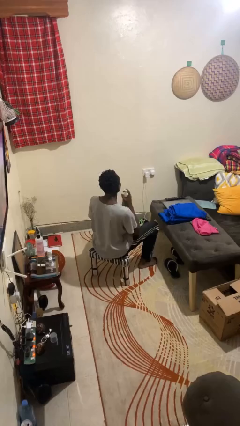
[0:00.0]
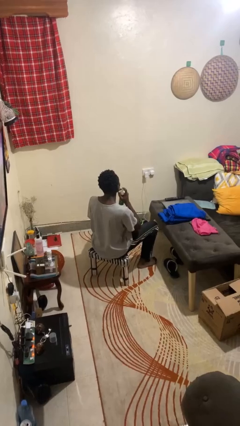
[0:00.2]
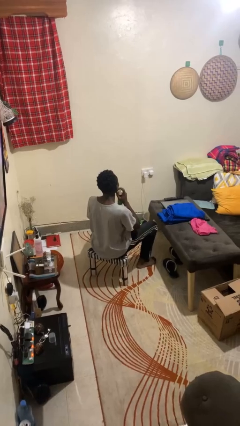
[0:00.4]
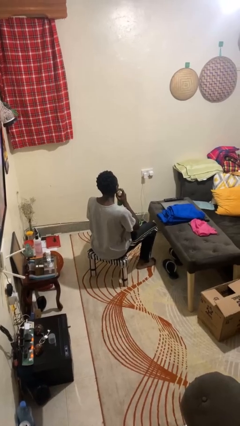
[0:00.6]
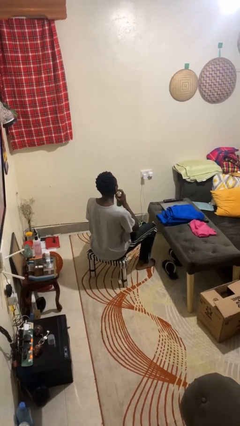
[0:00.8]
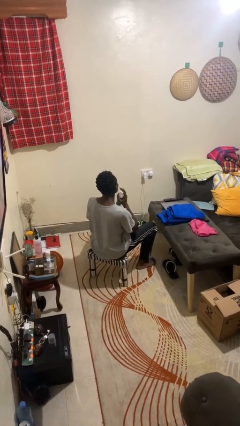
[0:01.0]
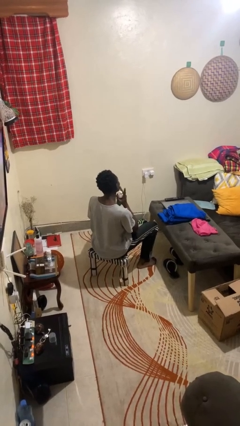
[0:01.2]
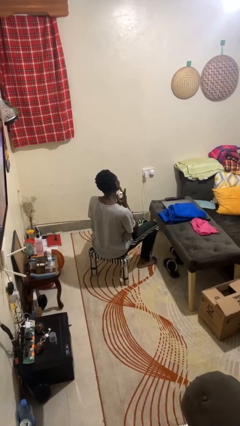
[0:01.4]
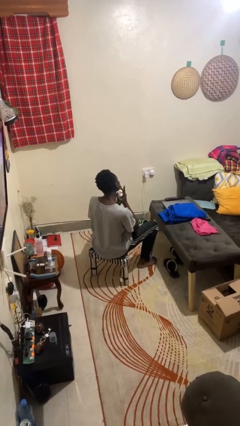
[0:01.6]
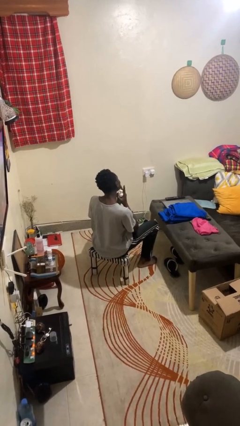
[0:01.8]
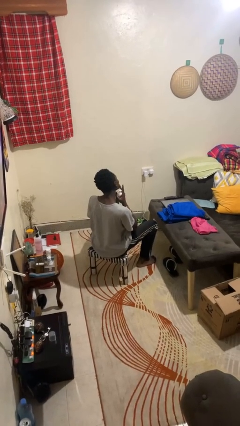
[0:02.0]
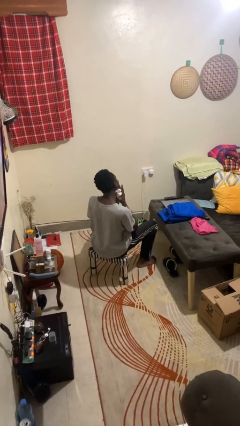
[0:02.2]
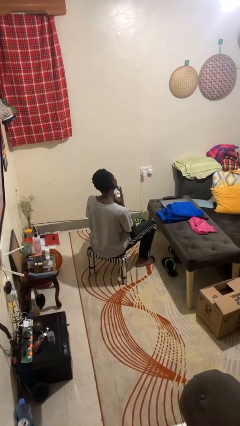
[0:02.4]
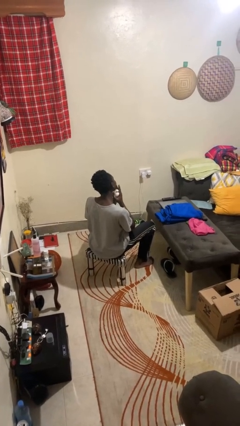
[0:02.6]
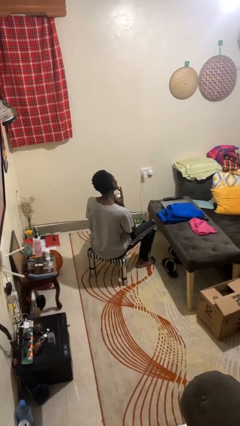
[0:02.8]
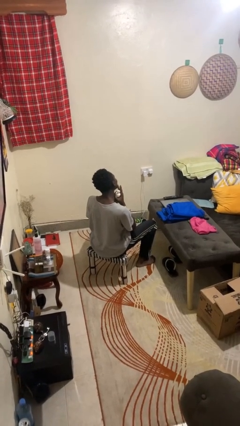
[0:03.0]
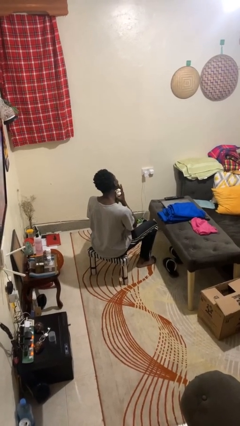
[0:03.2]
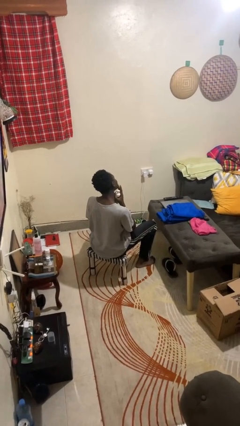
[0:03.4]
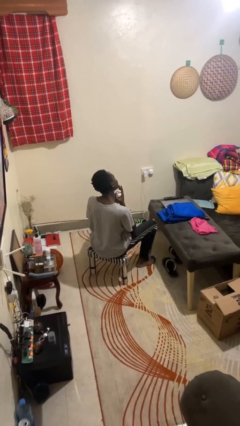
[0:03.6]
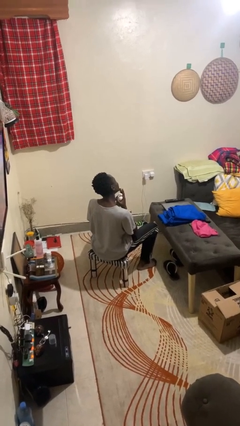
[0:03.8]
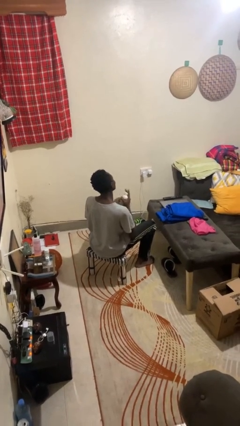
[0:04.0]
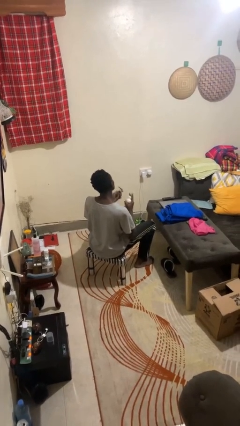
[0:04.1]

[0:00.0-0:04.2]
person applies shaving cream

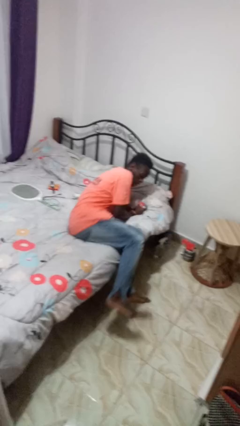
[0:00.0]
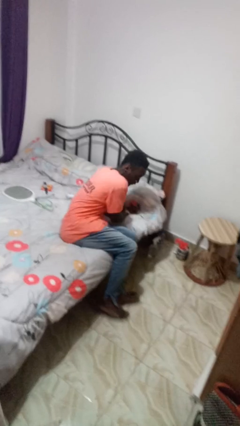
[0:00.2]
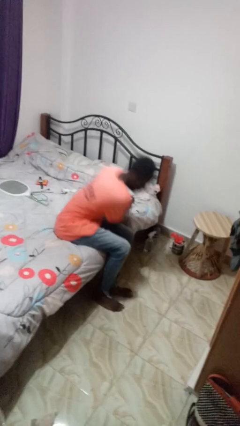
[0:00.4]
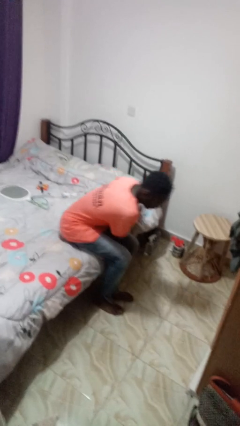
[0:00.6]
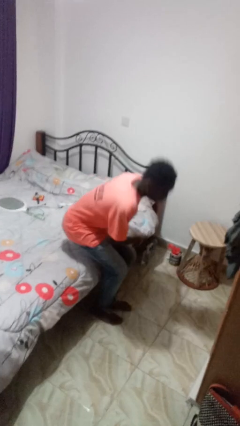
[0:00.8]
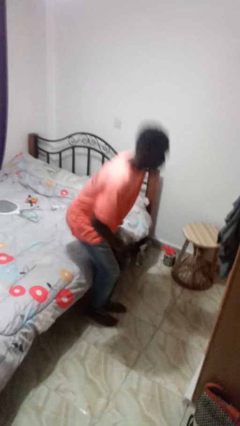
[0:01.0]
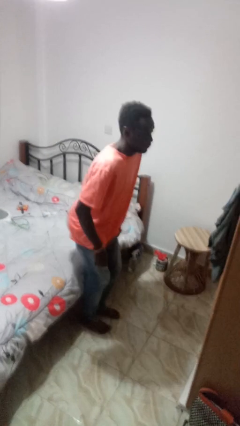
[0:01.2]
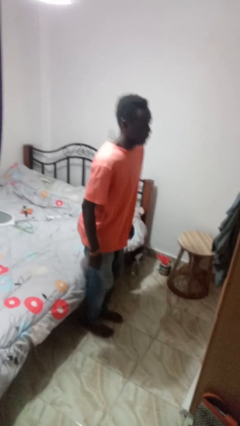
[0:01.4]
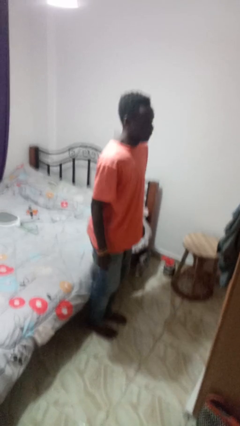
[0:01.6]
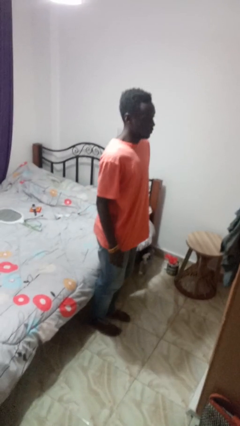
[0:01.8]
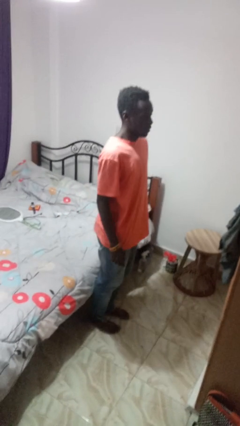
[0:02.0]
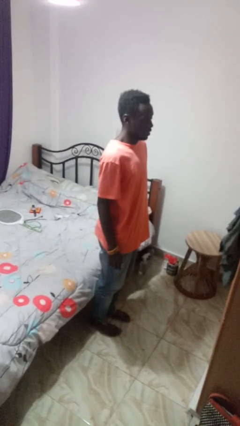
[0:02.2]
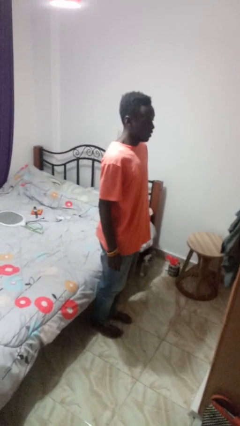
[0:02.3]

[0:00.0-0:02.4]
person stands up

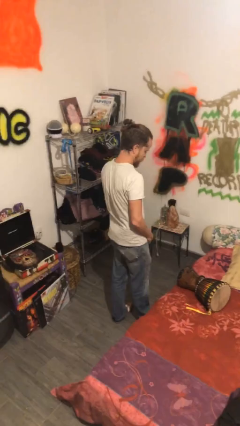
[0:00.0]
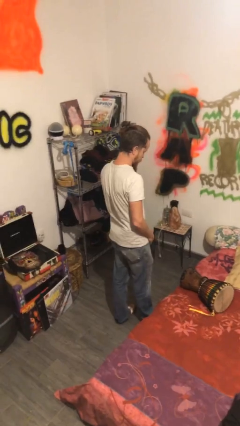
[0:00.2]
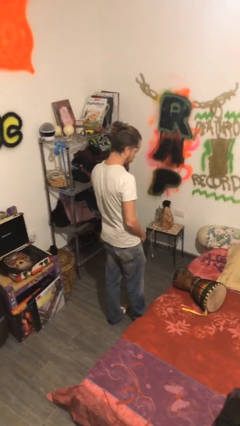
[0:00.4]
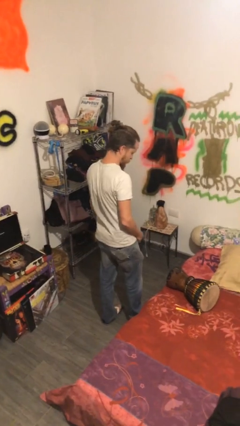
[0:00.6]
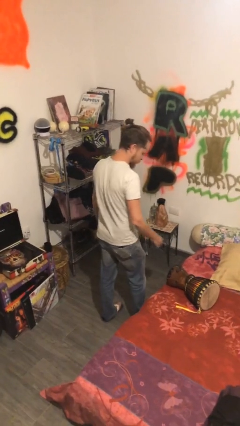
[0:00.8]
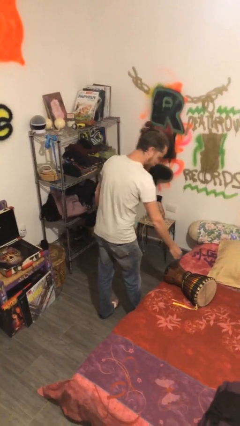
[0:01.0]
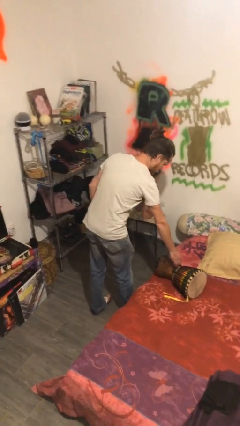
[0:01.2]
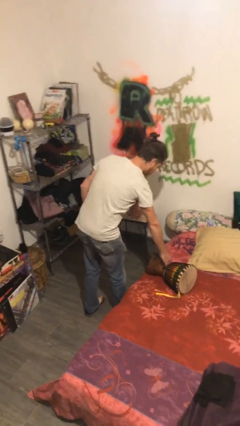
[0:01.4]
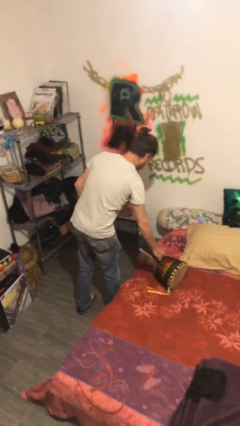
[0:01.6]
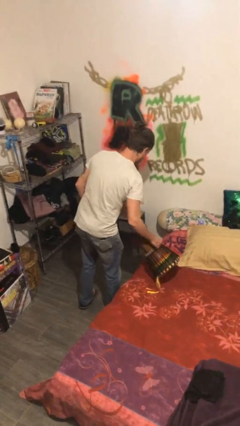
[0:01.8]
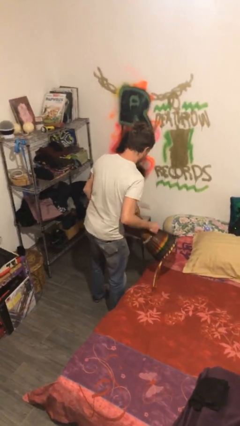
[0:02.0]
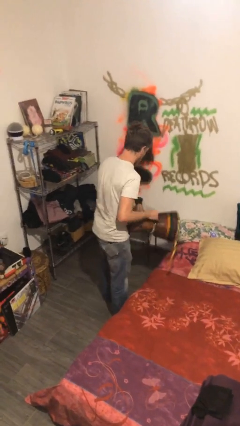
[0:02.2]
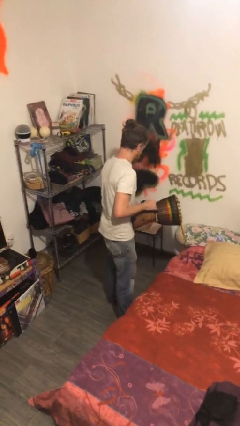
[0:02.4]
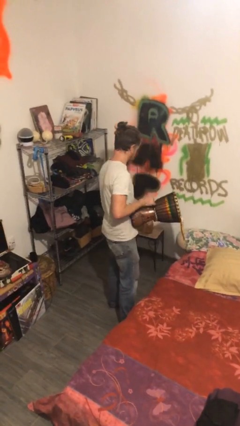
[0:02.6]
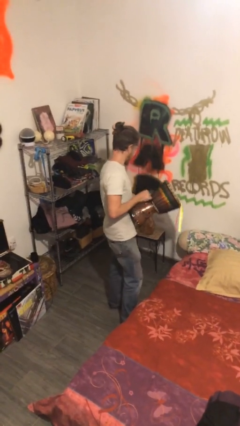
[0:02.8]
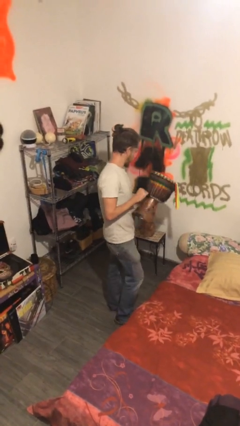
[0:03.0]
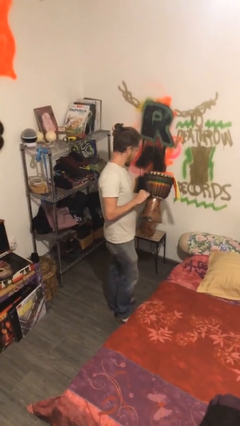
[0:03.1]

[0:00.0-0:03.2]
person picks up object from bed

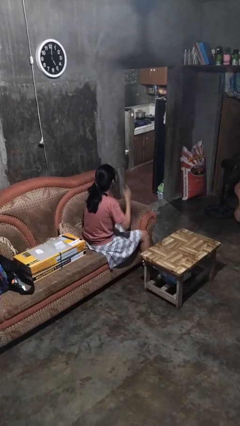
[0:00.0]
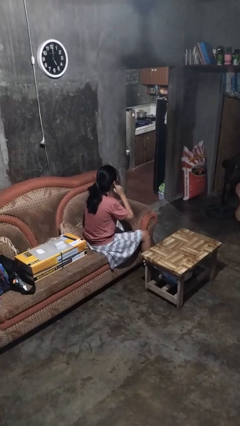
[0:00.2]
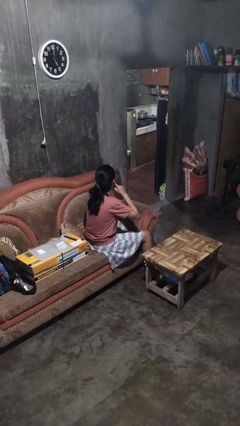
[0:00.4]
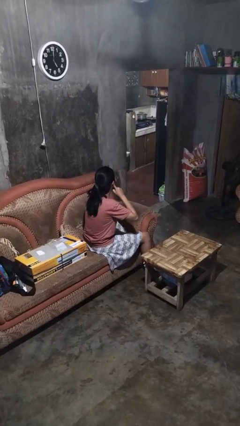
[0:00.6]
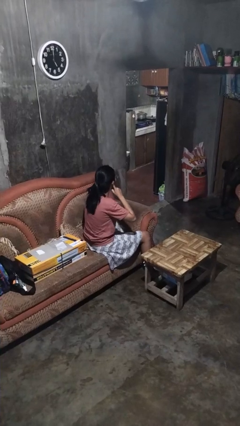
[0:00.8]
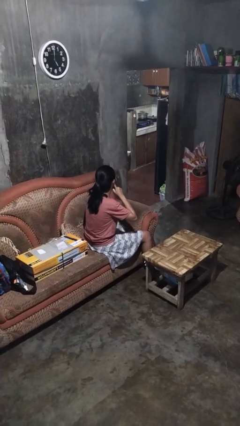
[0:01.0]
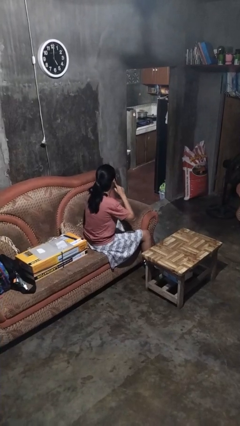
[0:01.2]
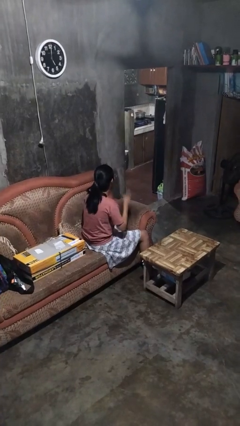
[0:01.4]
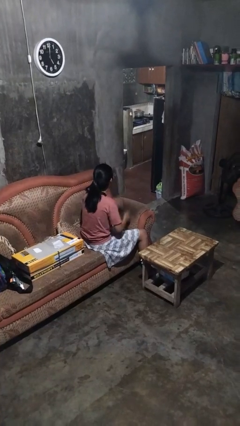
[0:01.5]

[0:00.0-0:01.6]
person puts fingers in ear

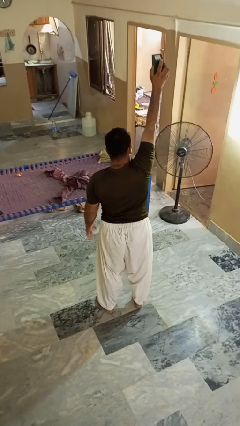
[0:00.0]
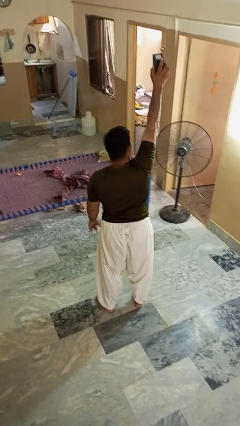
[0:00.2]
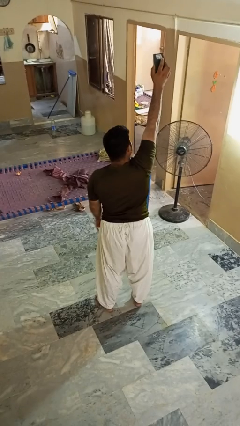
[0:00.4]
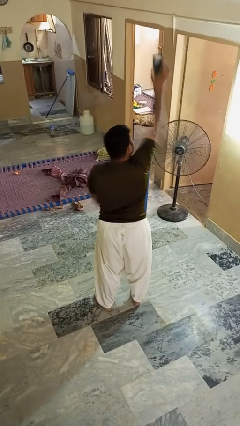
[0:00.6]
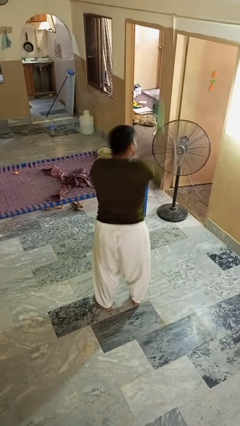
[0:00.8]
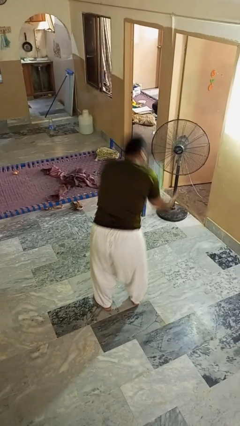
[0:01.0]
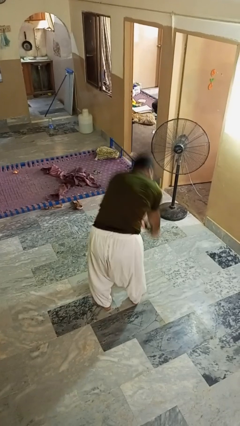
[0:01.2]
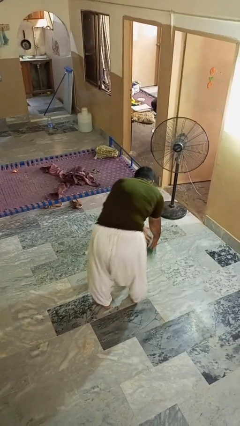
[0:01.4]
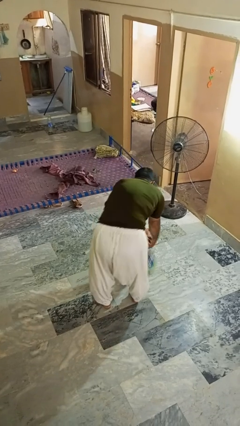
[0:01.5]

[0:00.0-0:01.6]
person drops object

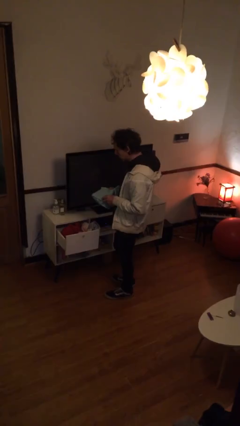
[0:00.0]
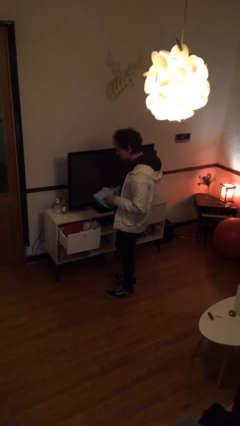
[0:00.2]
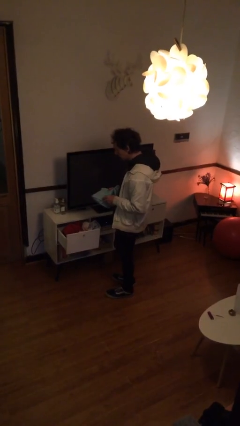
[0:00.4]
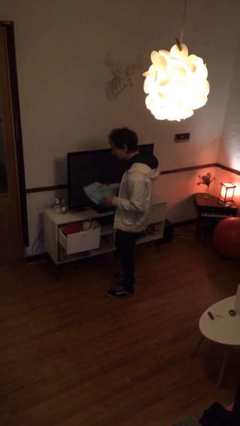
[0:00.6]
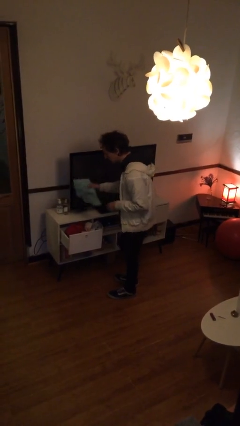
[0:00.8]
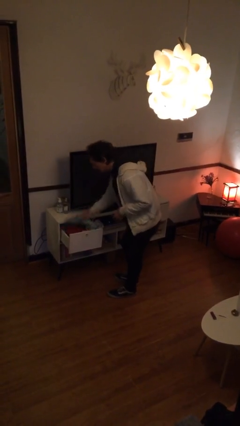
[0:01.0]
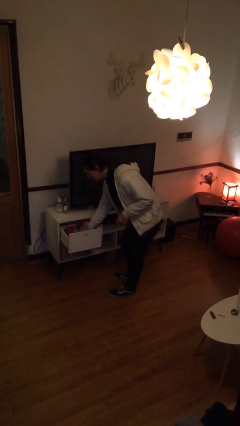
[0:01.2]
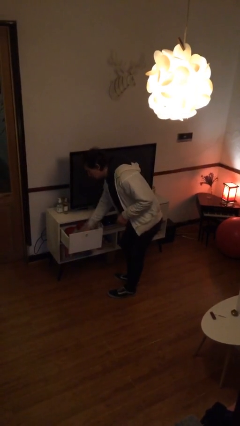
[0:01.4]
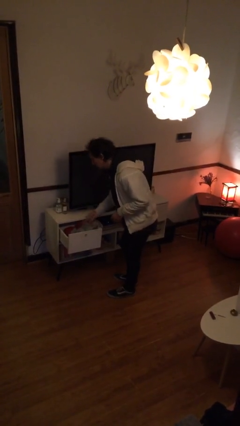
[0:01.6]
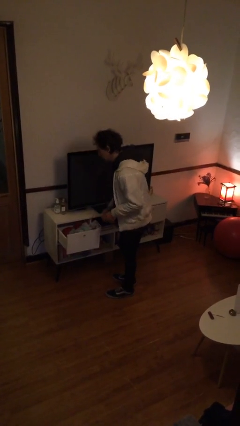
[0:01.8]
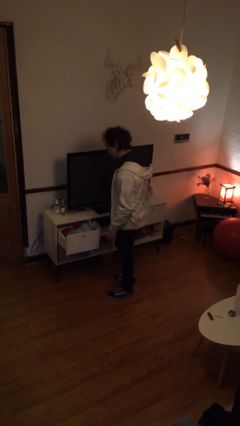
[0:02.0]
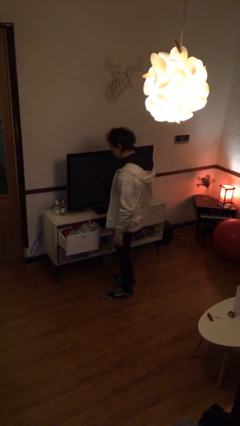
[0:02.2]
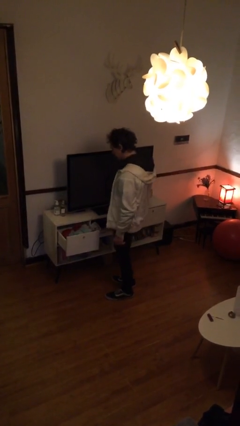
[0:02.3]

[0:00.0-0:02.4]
person puts clothes into dresser

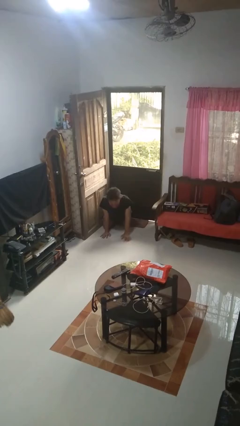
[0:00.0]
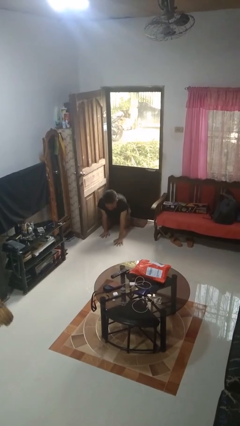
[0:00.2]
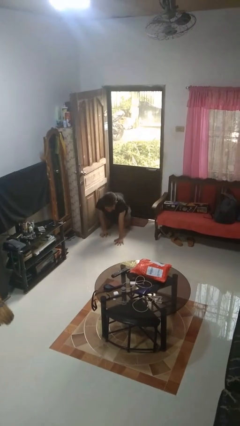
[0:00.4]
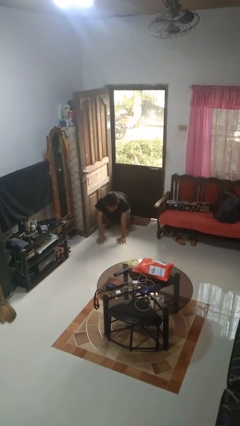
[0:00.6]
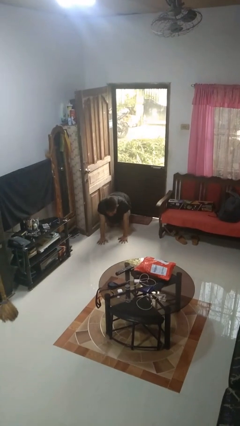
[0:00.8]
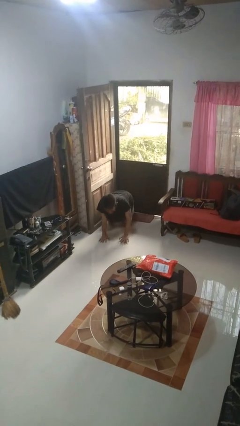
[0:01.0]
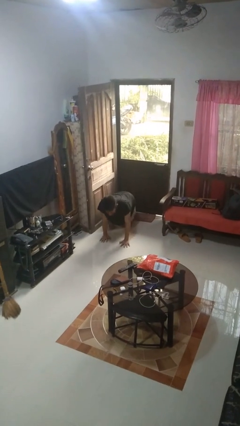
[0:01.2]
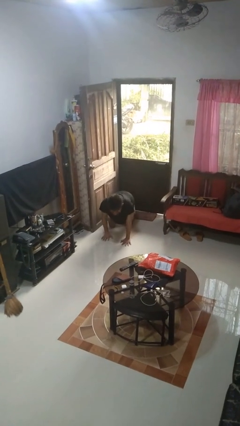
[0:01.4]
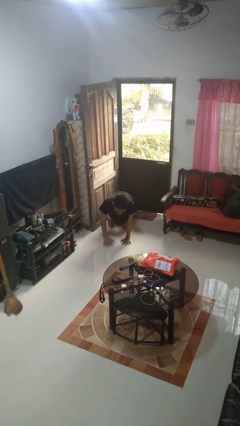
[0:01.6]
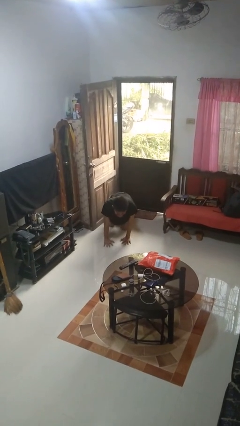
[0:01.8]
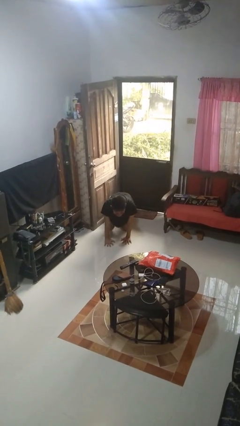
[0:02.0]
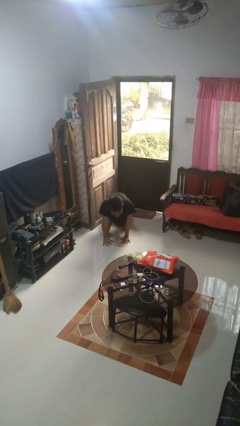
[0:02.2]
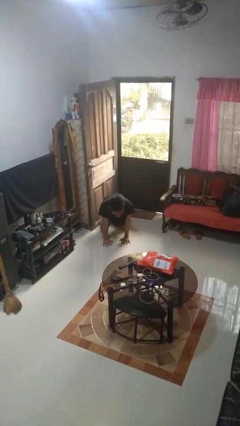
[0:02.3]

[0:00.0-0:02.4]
person crawls
